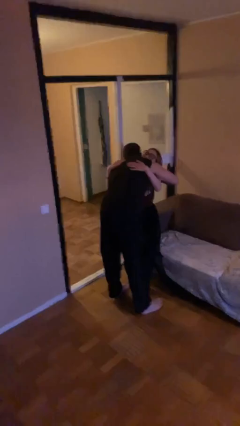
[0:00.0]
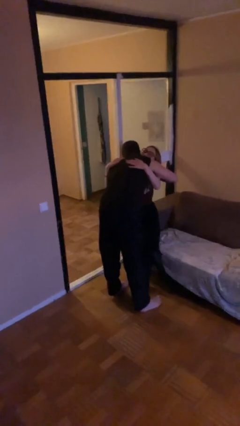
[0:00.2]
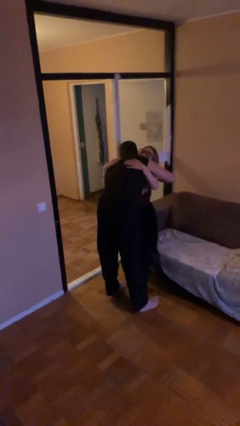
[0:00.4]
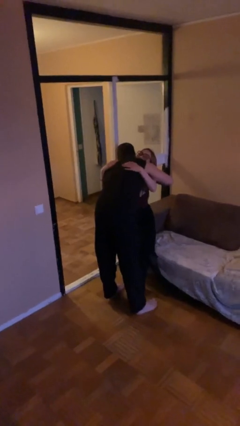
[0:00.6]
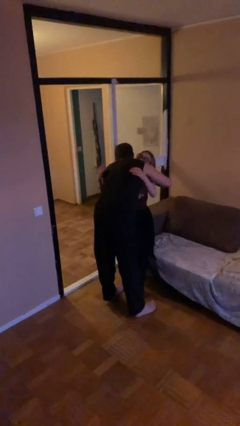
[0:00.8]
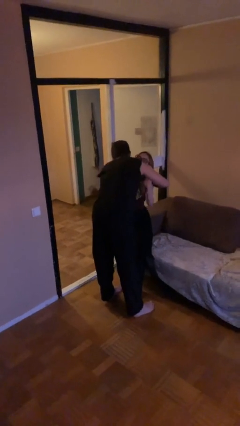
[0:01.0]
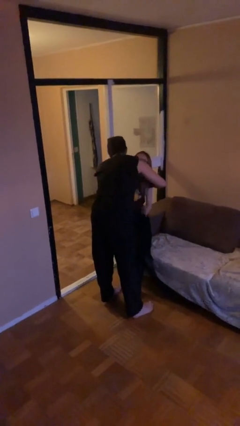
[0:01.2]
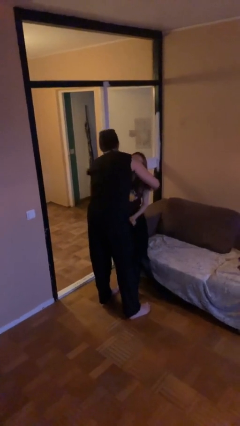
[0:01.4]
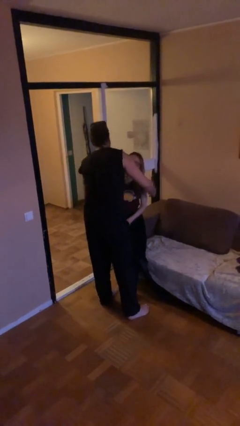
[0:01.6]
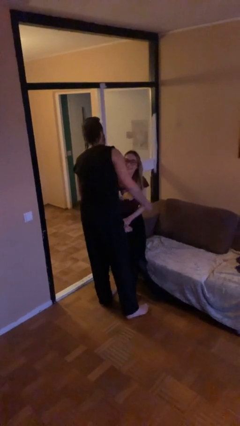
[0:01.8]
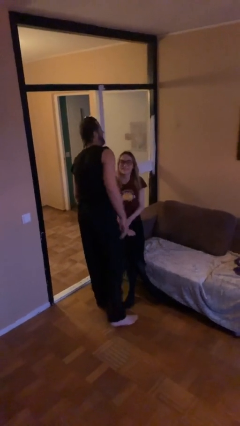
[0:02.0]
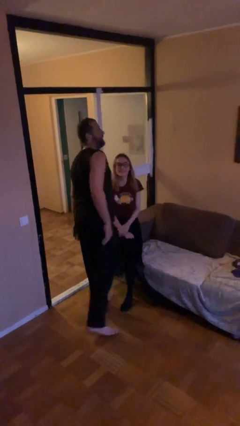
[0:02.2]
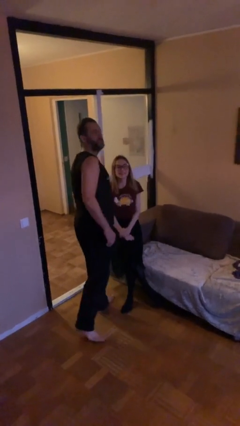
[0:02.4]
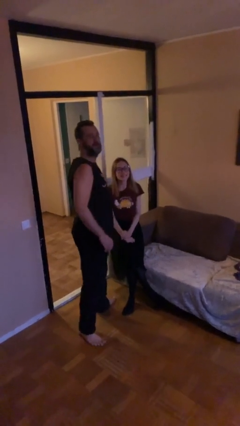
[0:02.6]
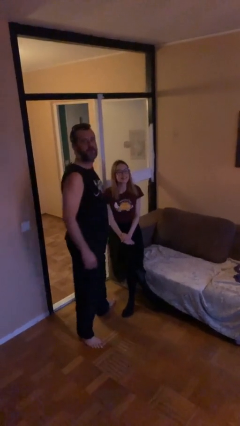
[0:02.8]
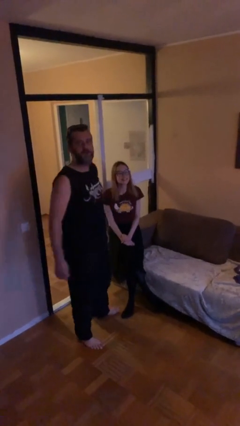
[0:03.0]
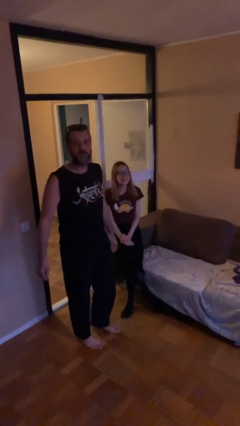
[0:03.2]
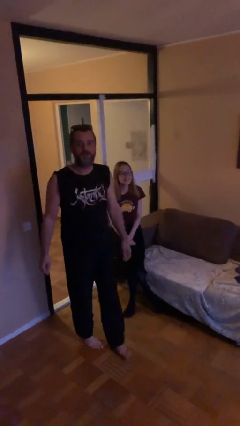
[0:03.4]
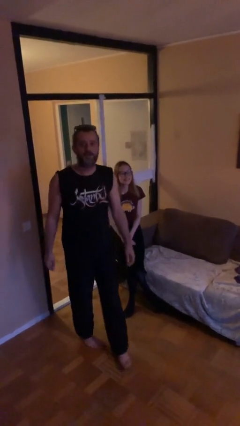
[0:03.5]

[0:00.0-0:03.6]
person embraces person

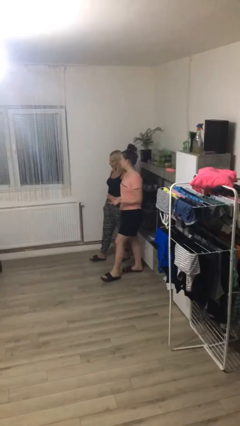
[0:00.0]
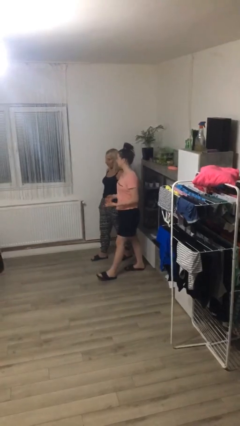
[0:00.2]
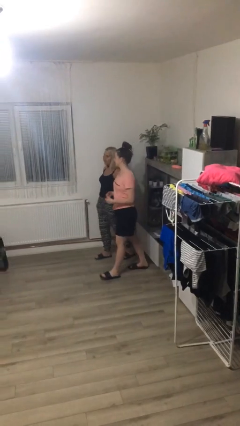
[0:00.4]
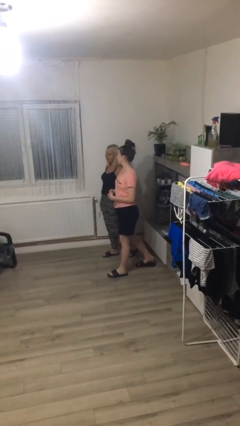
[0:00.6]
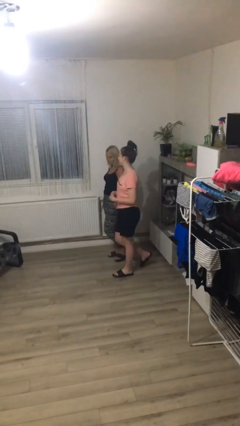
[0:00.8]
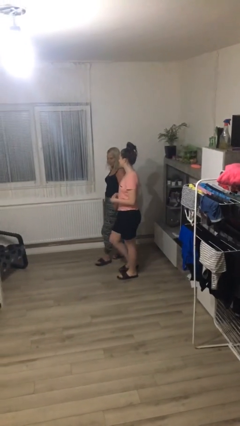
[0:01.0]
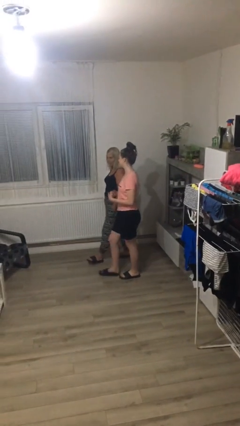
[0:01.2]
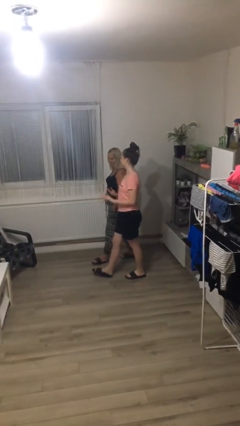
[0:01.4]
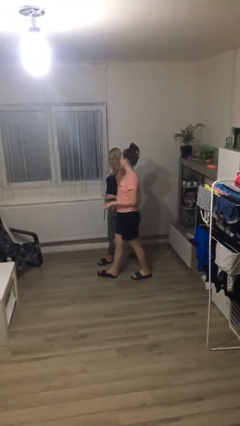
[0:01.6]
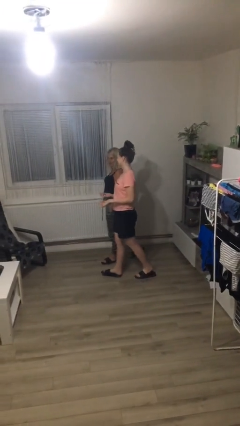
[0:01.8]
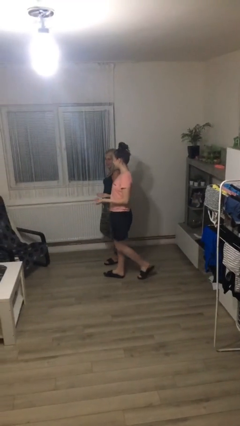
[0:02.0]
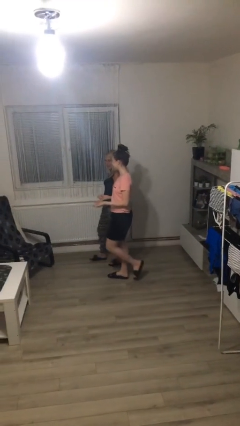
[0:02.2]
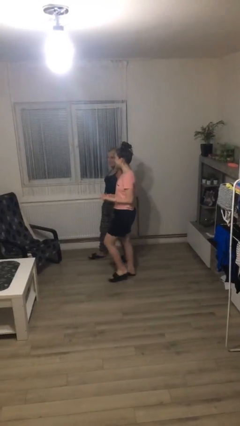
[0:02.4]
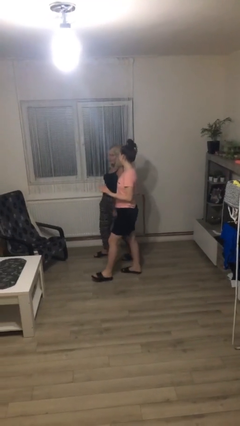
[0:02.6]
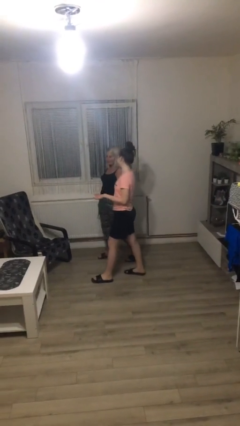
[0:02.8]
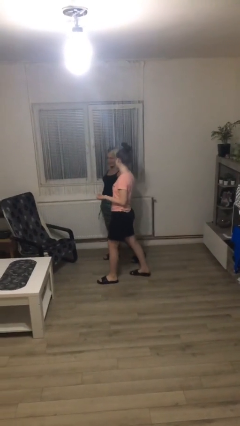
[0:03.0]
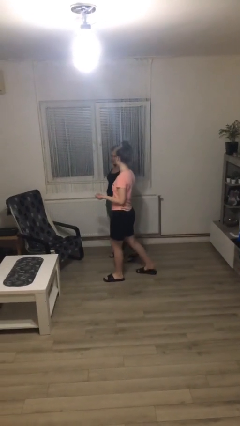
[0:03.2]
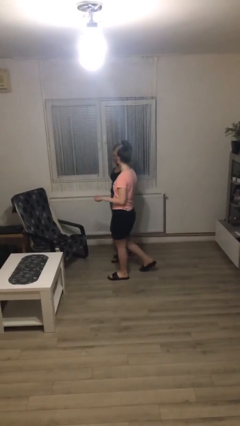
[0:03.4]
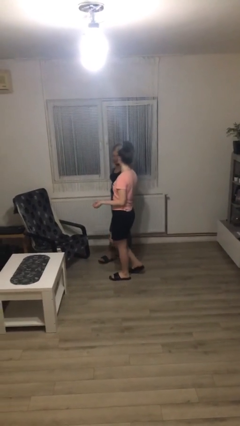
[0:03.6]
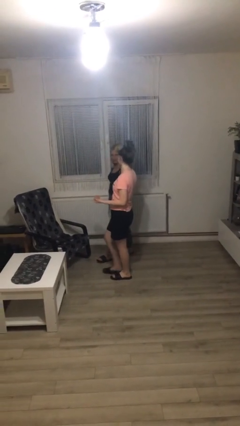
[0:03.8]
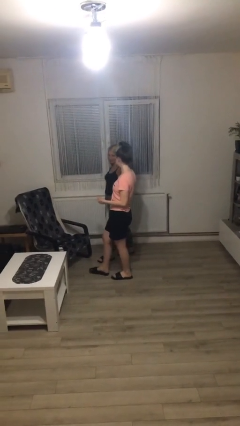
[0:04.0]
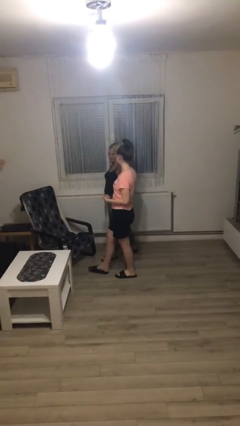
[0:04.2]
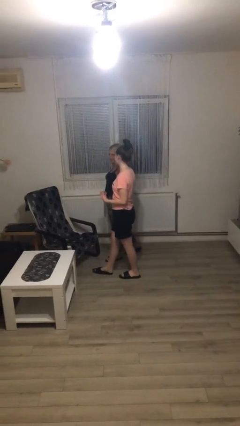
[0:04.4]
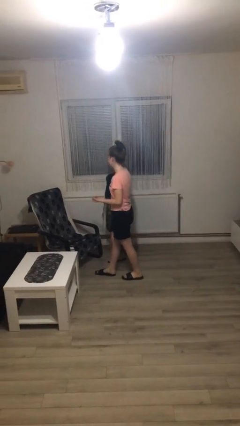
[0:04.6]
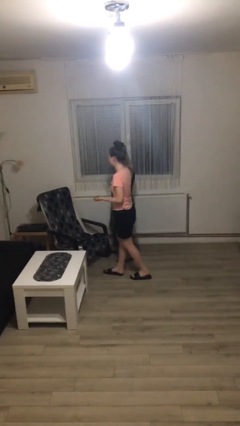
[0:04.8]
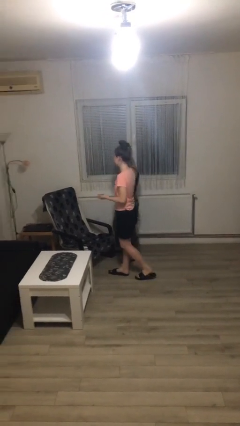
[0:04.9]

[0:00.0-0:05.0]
person talks to person

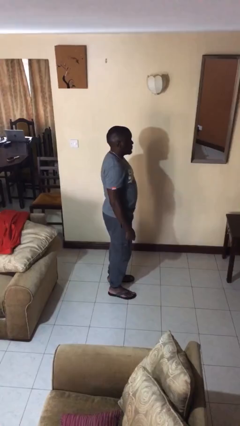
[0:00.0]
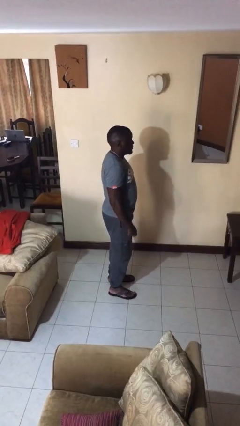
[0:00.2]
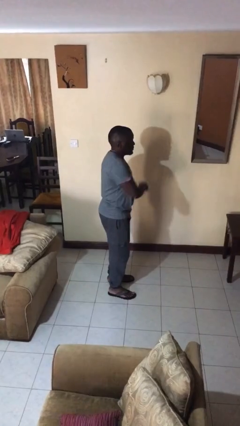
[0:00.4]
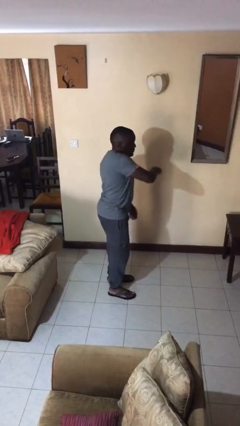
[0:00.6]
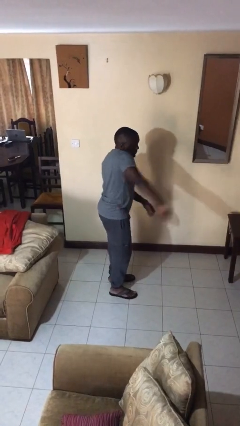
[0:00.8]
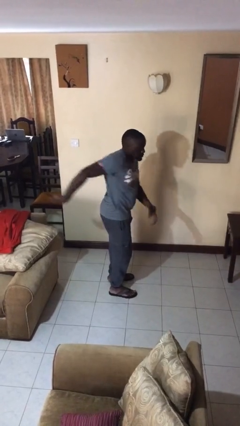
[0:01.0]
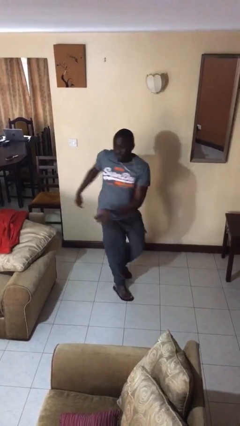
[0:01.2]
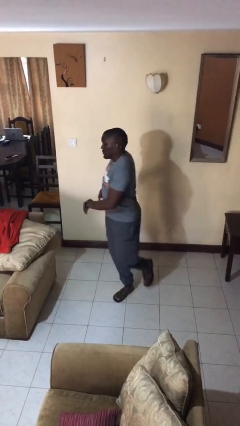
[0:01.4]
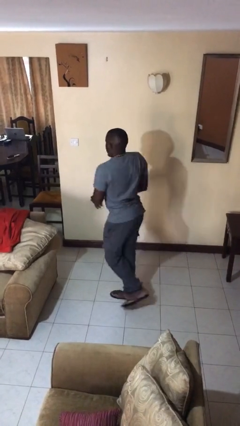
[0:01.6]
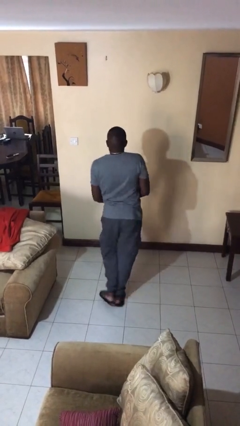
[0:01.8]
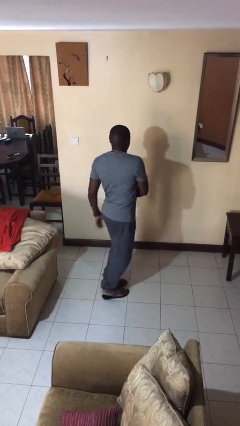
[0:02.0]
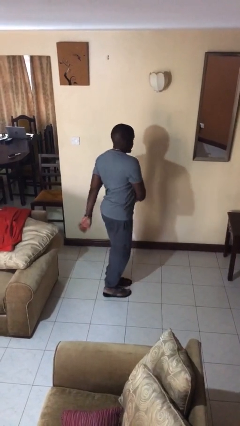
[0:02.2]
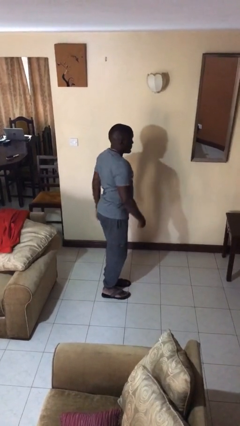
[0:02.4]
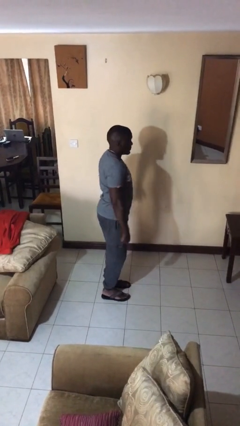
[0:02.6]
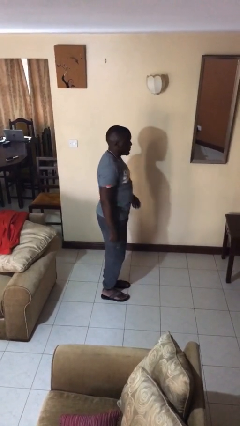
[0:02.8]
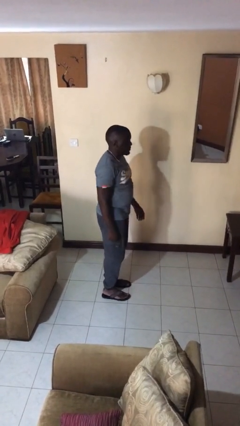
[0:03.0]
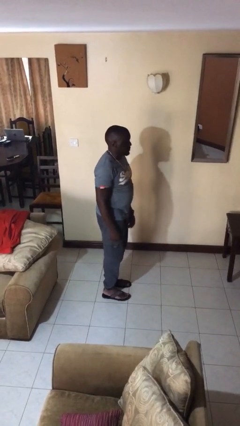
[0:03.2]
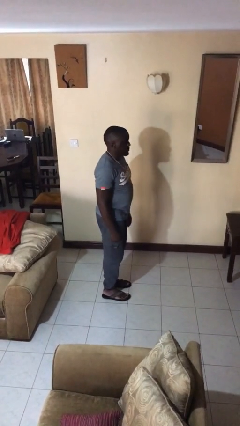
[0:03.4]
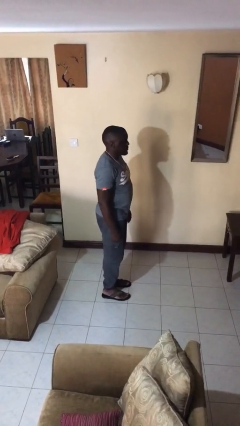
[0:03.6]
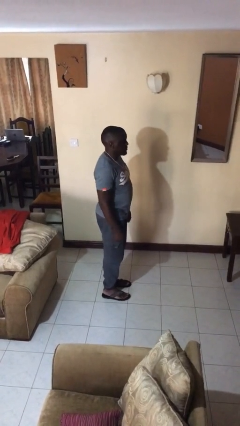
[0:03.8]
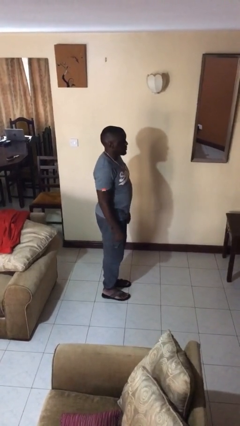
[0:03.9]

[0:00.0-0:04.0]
person twirls

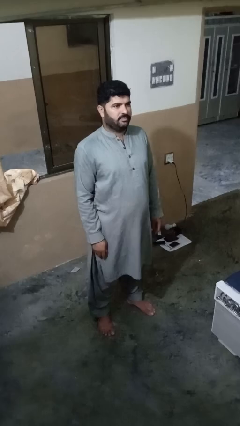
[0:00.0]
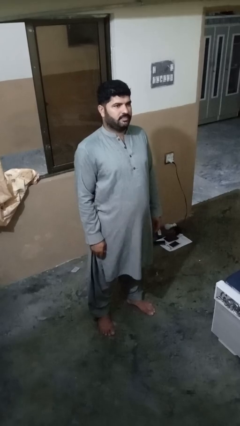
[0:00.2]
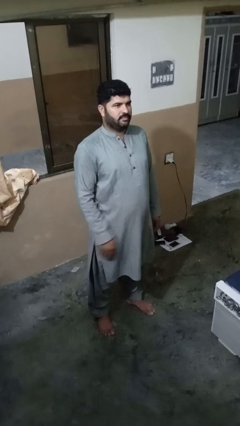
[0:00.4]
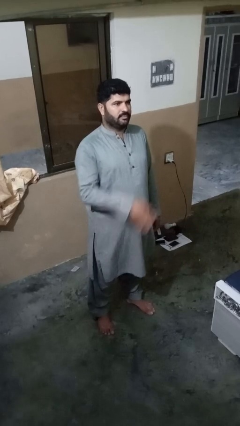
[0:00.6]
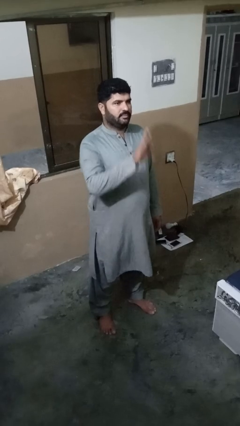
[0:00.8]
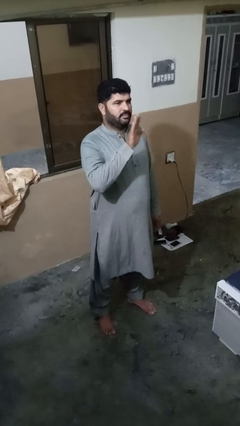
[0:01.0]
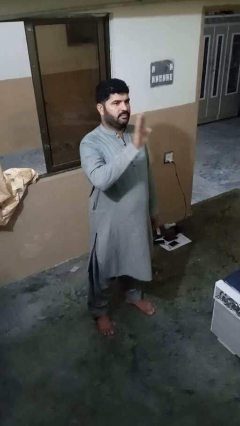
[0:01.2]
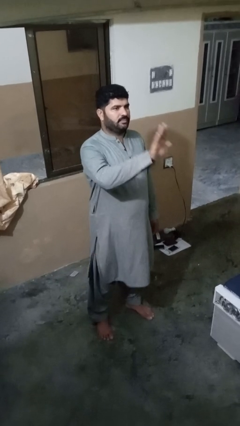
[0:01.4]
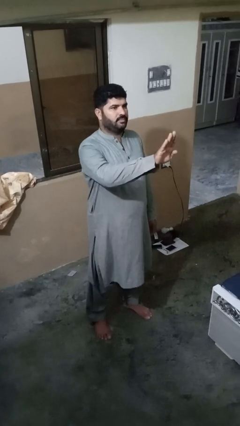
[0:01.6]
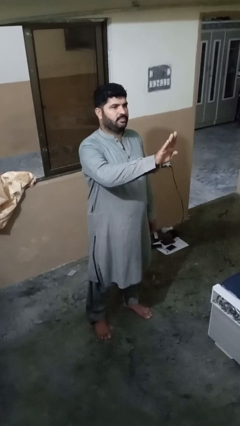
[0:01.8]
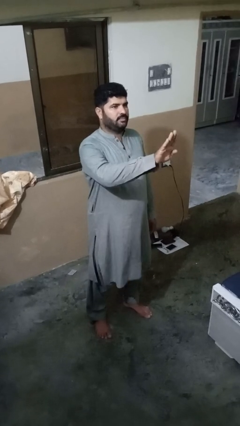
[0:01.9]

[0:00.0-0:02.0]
person gestures stop

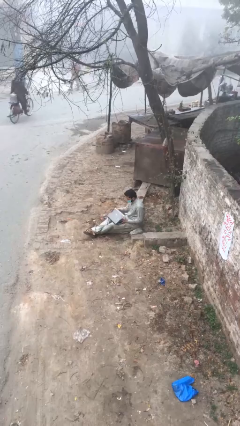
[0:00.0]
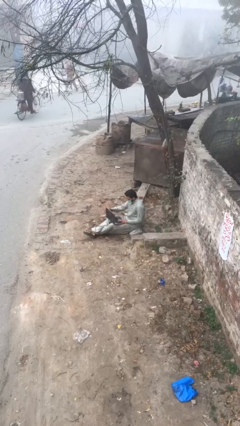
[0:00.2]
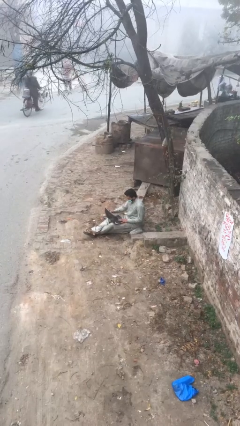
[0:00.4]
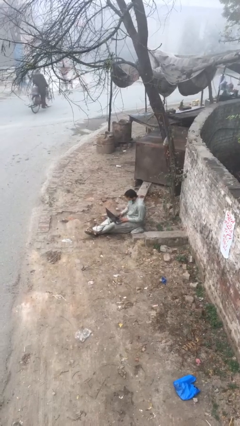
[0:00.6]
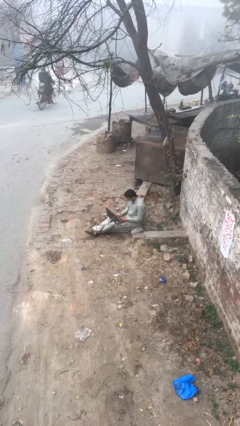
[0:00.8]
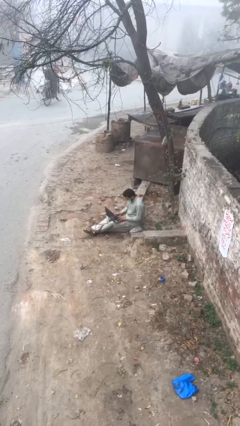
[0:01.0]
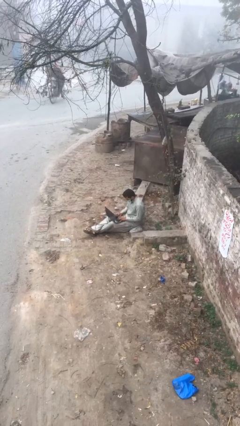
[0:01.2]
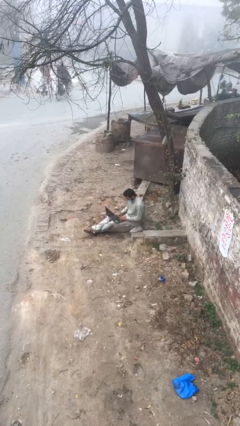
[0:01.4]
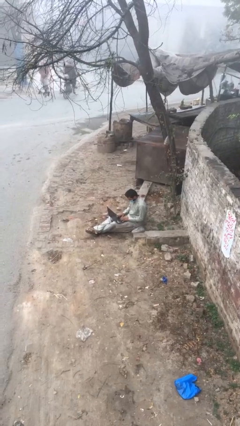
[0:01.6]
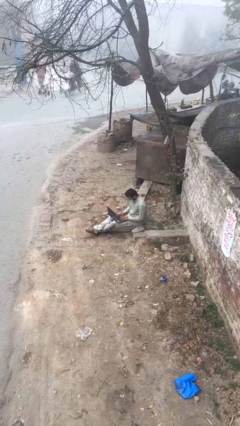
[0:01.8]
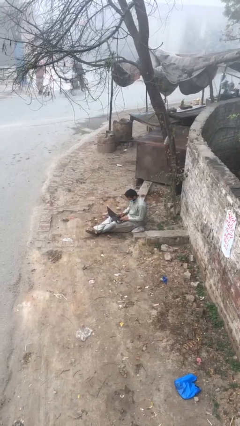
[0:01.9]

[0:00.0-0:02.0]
person interacts with laptop

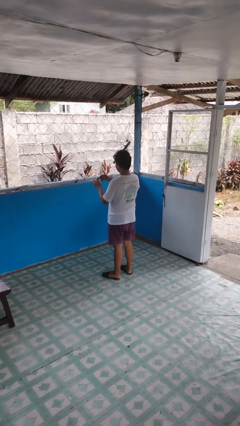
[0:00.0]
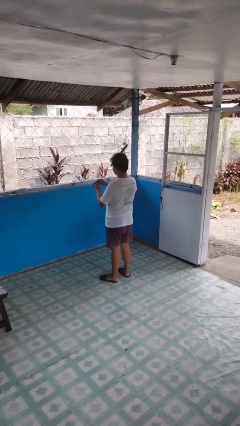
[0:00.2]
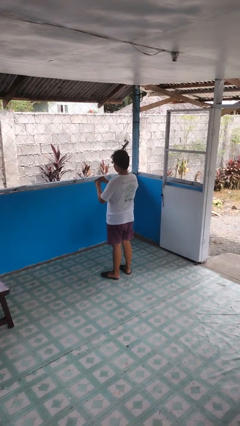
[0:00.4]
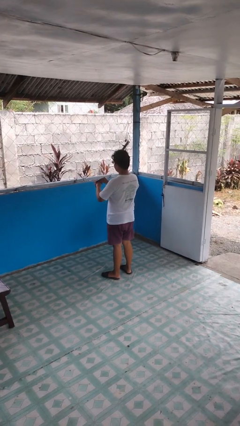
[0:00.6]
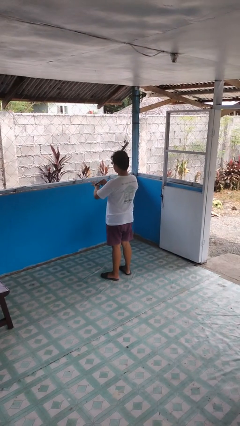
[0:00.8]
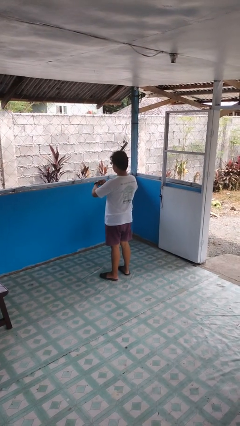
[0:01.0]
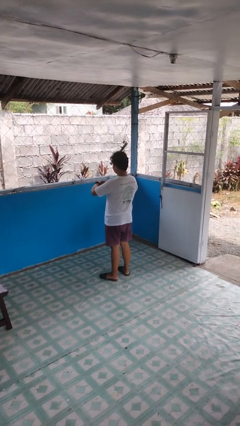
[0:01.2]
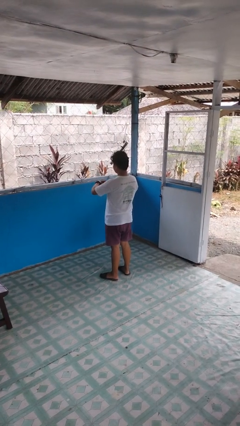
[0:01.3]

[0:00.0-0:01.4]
person puts on wristwatch
